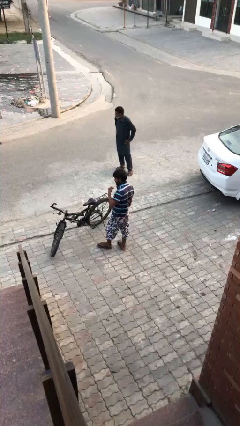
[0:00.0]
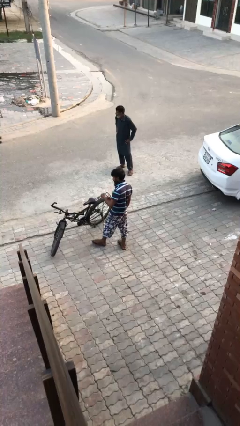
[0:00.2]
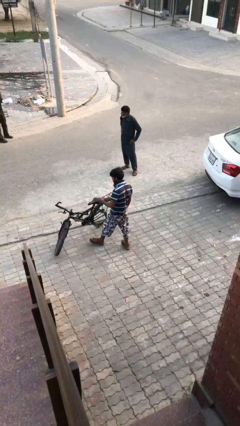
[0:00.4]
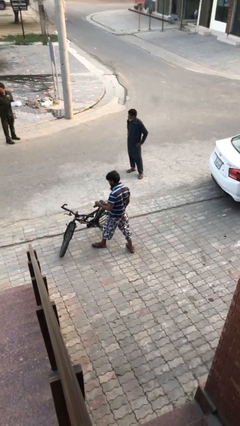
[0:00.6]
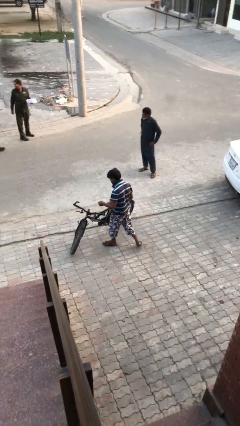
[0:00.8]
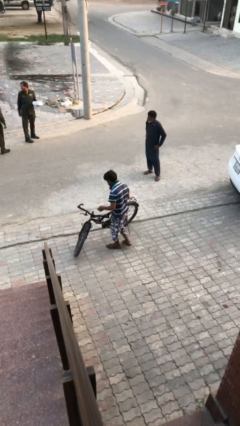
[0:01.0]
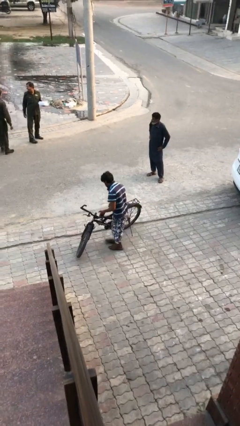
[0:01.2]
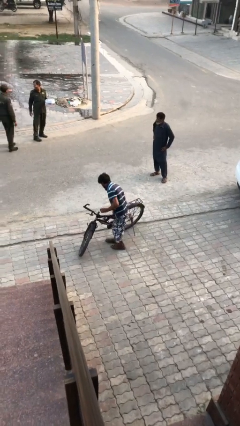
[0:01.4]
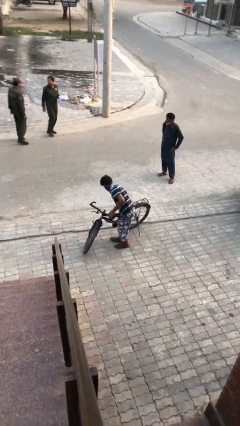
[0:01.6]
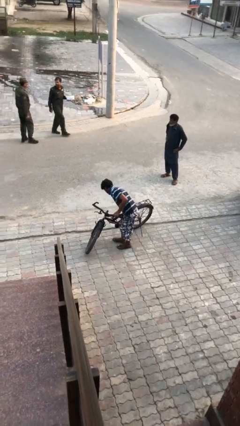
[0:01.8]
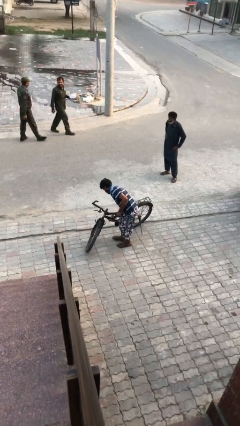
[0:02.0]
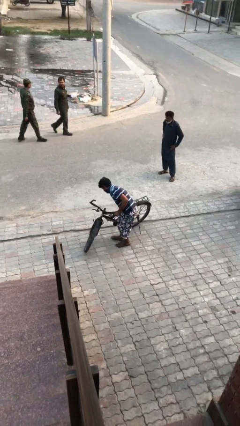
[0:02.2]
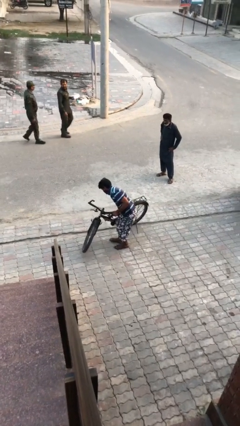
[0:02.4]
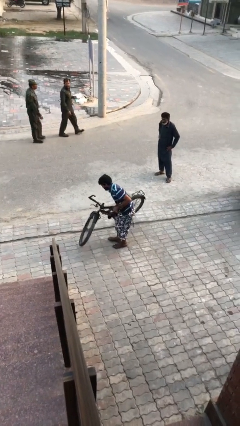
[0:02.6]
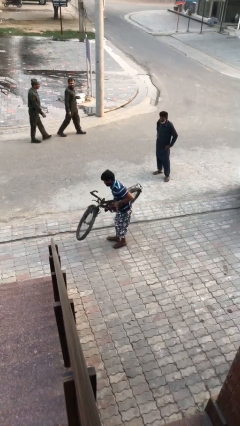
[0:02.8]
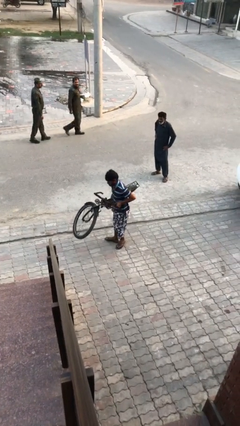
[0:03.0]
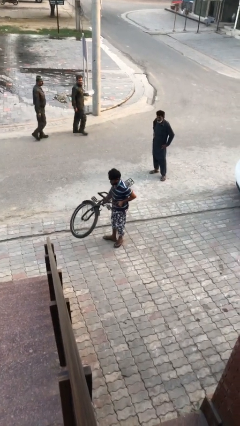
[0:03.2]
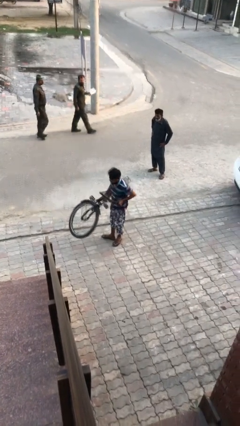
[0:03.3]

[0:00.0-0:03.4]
person picks up object from floor

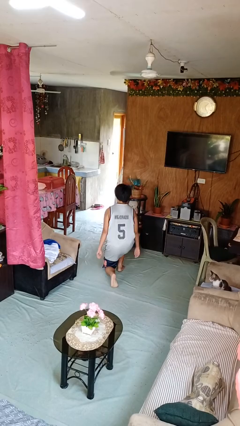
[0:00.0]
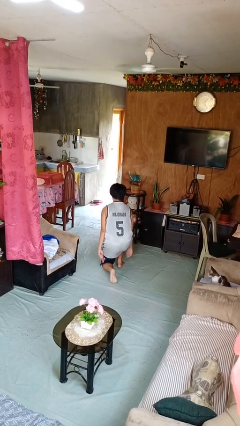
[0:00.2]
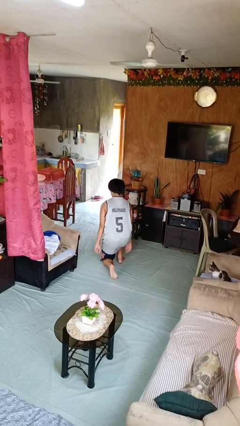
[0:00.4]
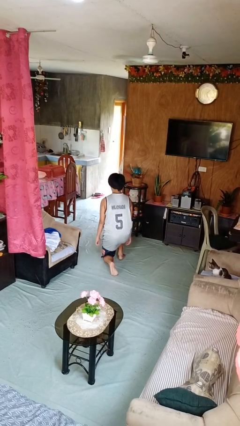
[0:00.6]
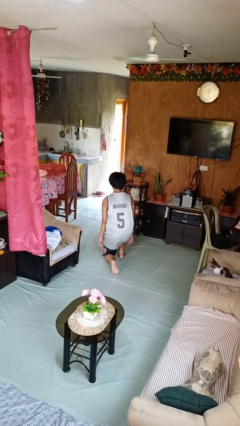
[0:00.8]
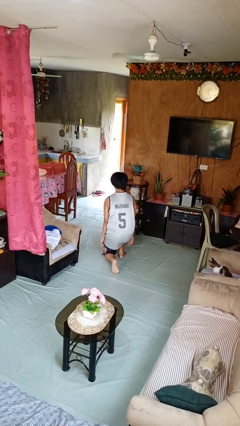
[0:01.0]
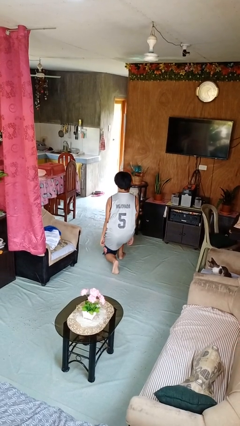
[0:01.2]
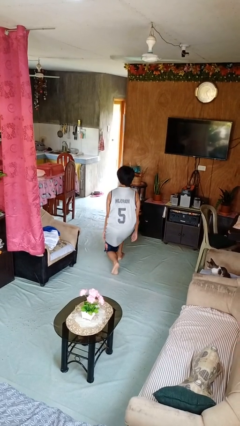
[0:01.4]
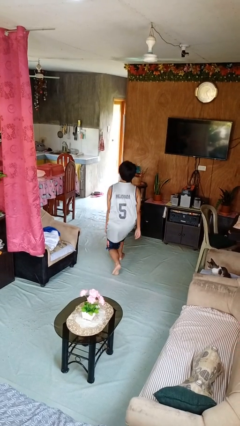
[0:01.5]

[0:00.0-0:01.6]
person kneels

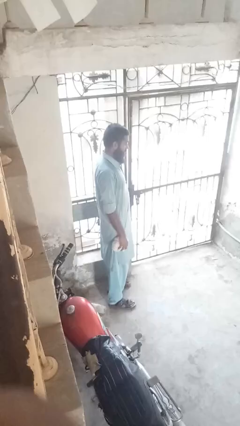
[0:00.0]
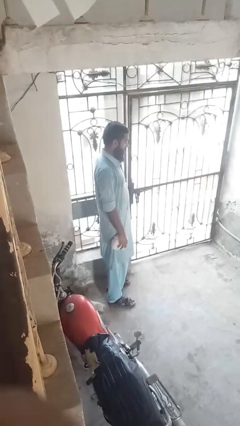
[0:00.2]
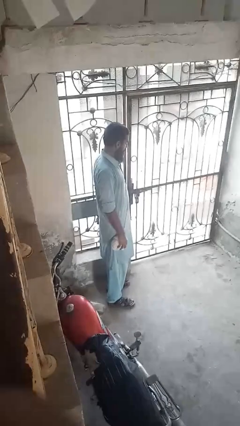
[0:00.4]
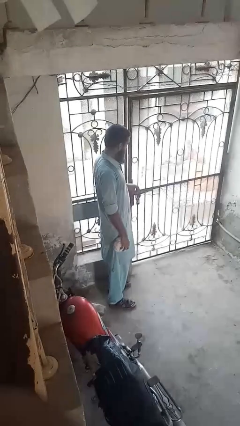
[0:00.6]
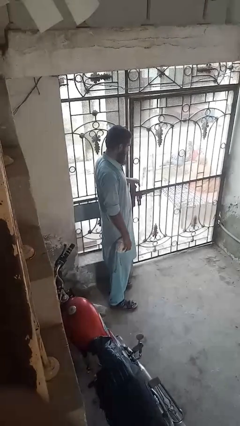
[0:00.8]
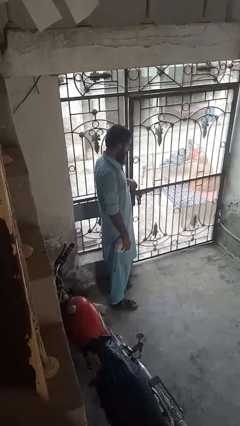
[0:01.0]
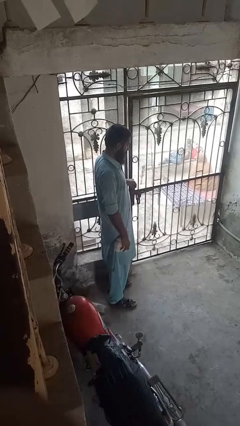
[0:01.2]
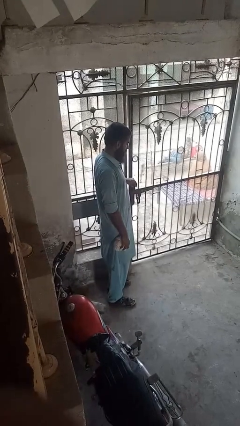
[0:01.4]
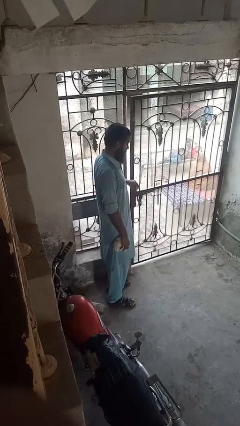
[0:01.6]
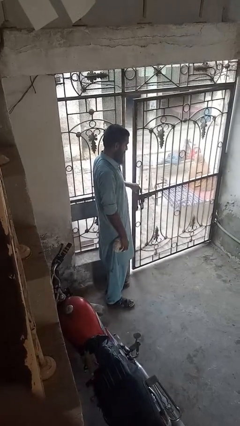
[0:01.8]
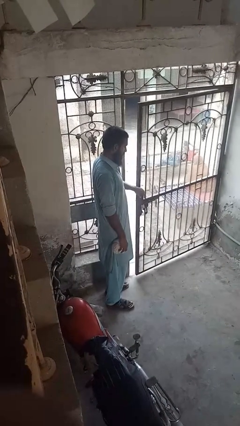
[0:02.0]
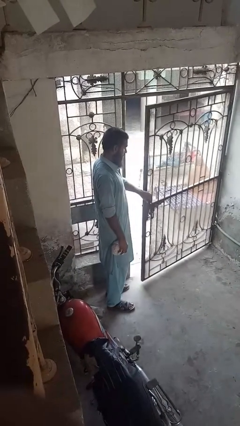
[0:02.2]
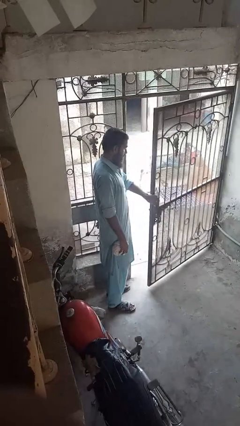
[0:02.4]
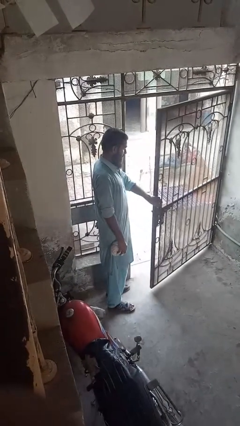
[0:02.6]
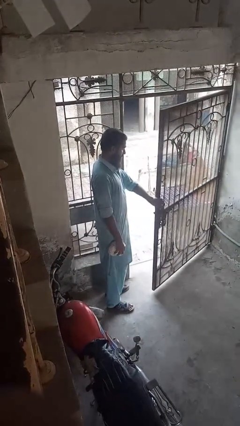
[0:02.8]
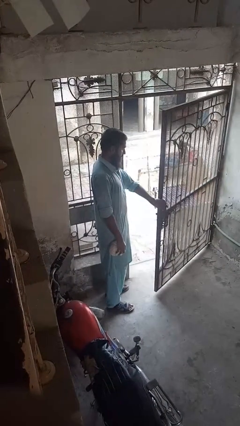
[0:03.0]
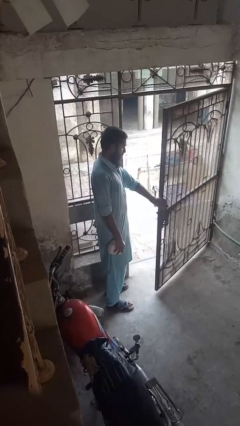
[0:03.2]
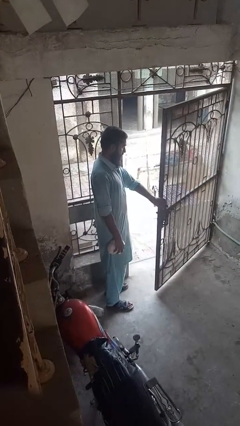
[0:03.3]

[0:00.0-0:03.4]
person opens gate

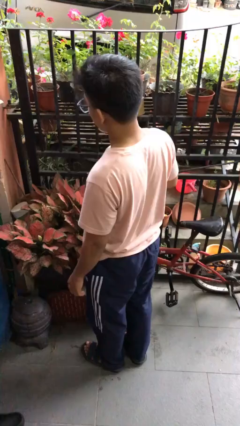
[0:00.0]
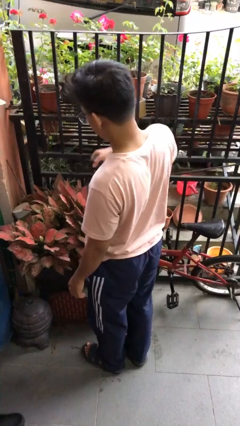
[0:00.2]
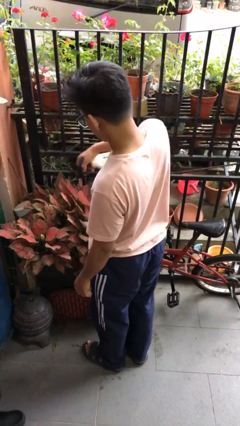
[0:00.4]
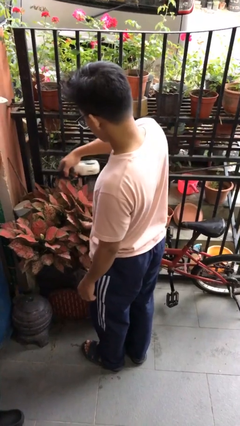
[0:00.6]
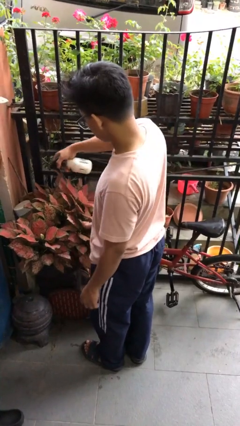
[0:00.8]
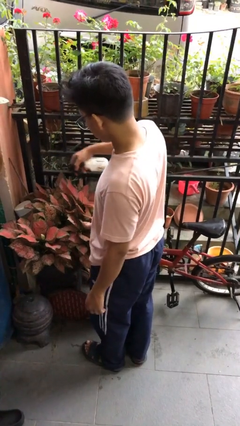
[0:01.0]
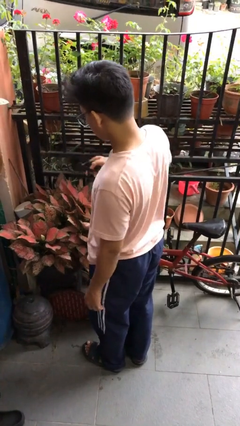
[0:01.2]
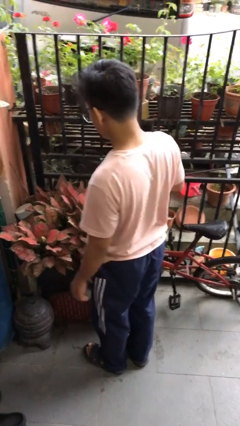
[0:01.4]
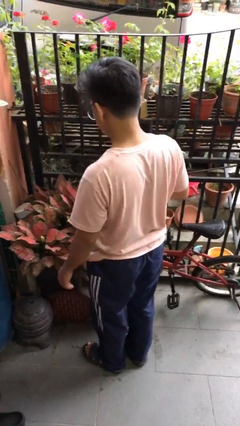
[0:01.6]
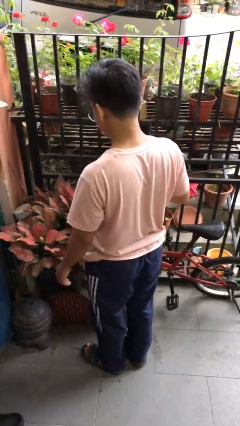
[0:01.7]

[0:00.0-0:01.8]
person waters houseplant

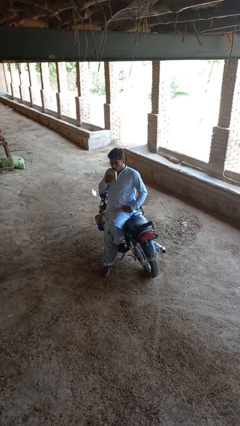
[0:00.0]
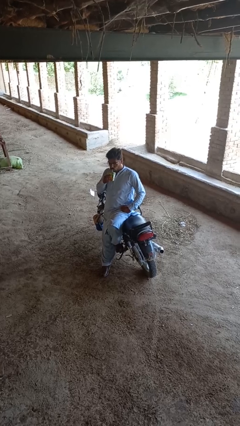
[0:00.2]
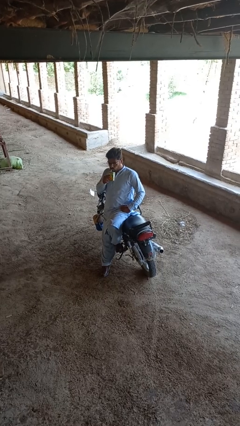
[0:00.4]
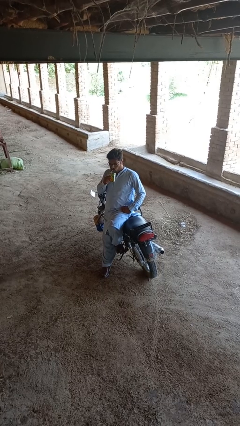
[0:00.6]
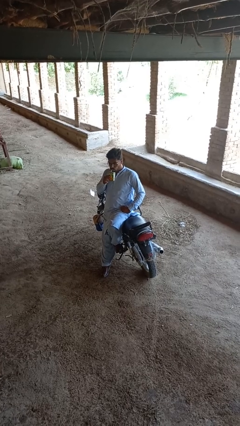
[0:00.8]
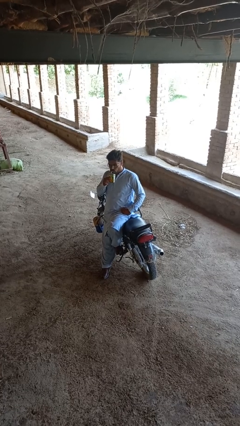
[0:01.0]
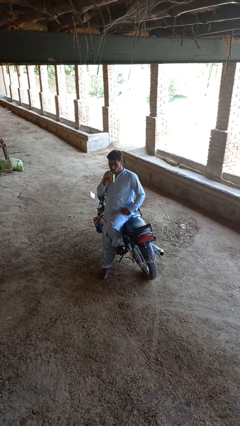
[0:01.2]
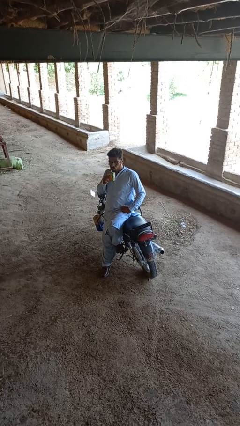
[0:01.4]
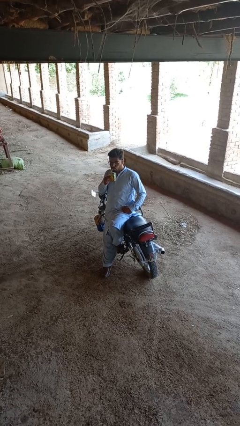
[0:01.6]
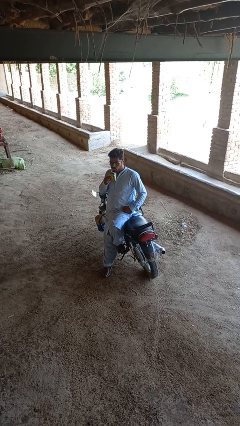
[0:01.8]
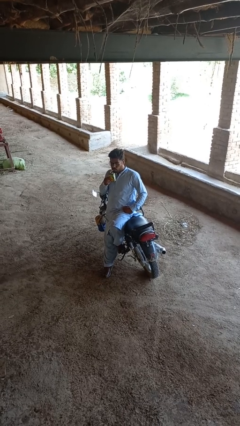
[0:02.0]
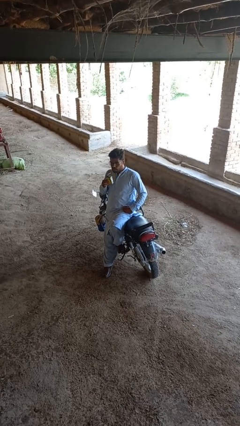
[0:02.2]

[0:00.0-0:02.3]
person drinks from straw

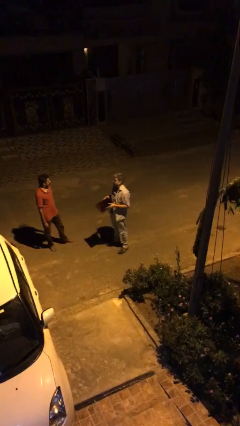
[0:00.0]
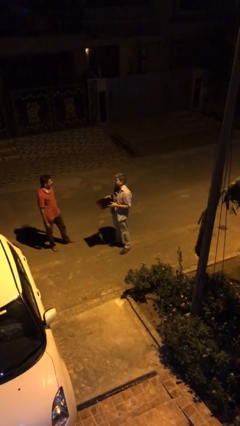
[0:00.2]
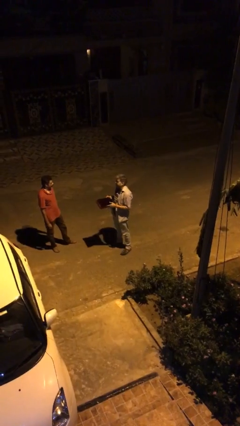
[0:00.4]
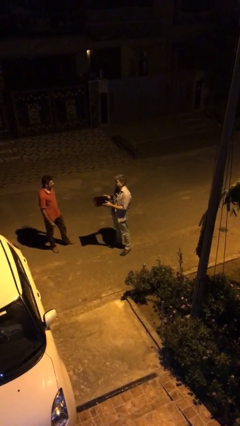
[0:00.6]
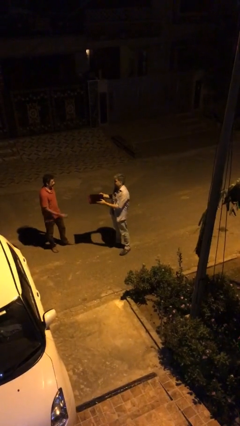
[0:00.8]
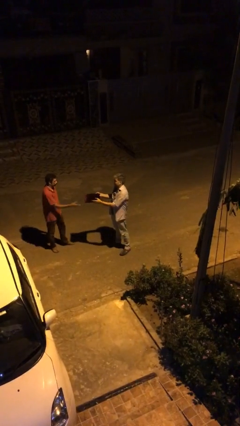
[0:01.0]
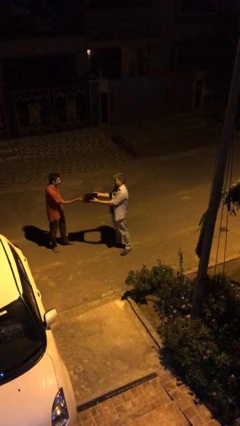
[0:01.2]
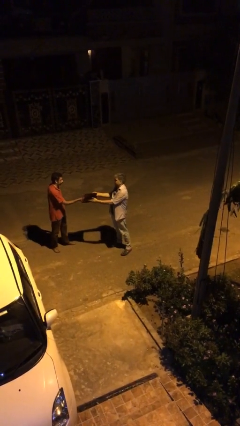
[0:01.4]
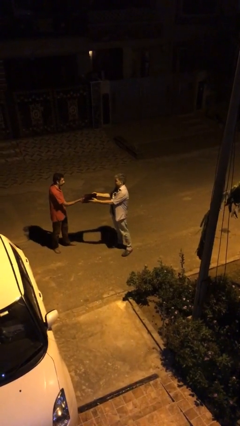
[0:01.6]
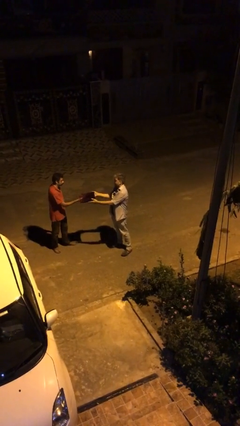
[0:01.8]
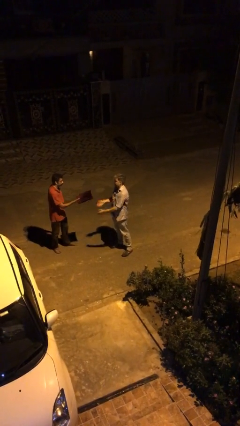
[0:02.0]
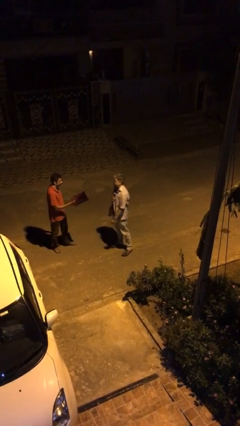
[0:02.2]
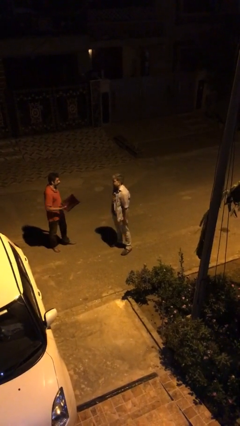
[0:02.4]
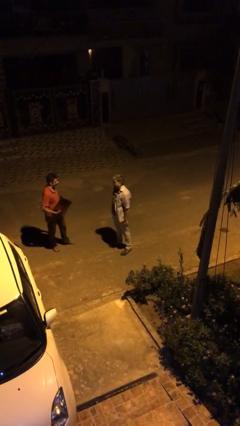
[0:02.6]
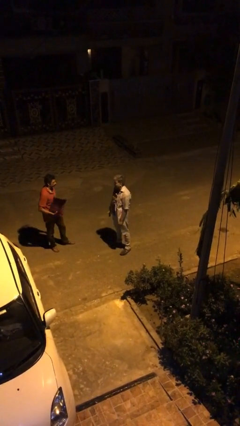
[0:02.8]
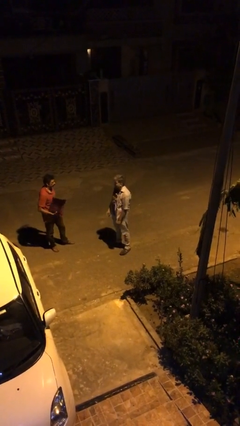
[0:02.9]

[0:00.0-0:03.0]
person transfers object to person

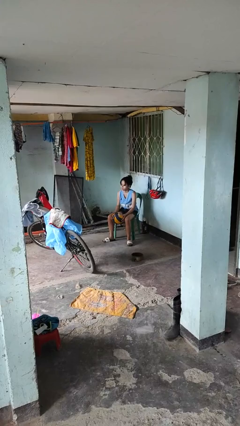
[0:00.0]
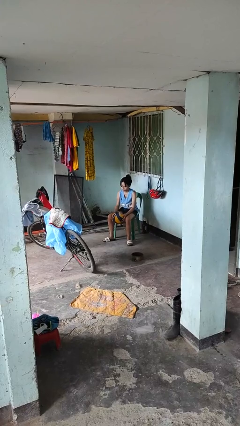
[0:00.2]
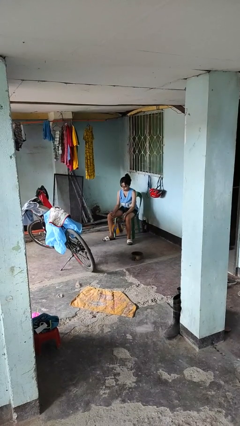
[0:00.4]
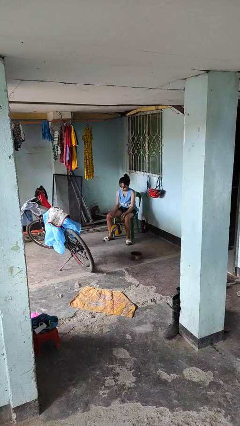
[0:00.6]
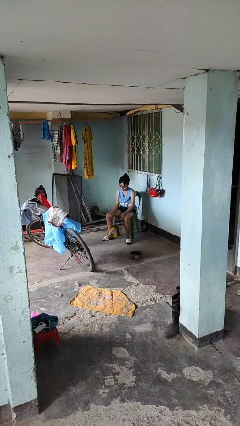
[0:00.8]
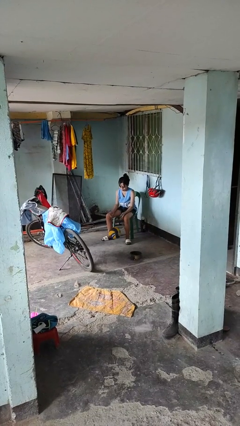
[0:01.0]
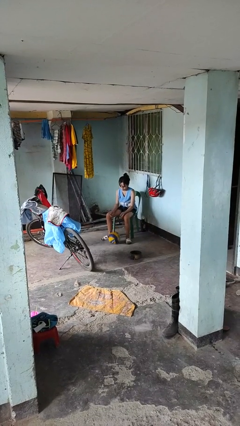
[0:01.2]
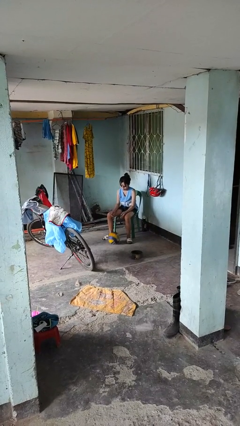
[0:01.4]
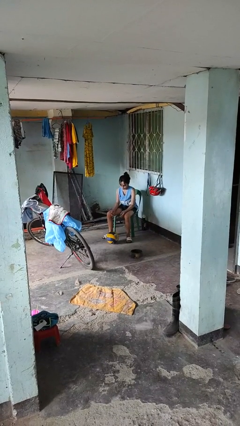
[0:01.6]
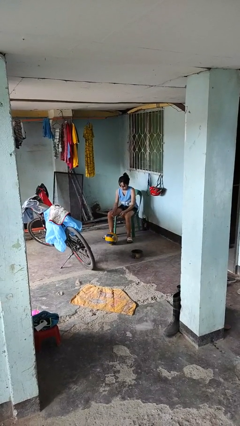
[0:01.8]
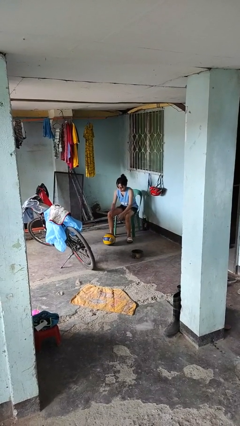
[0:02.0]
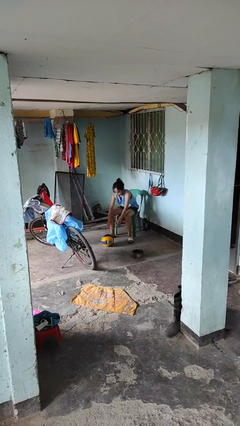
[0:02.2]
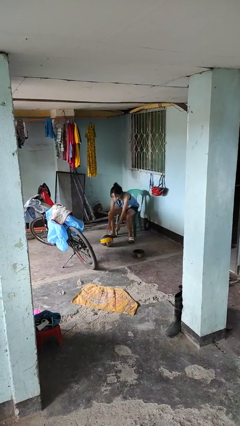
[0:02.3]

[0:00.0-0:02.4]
person drops object
